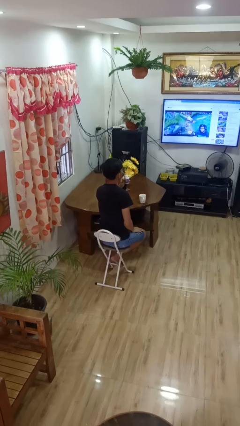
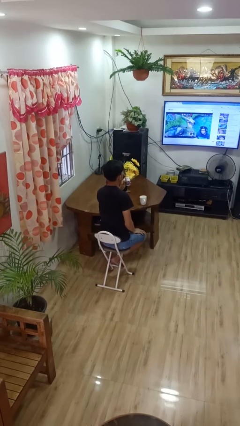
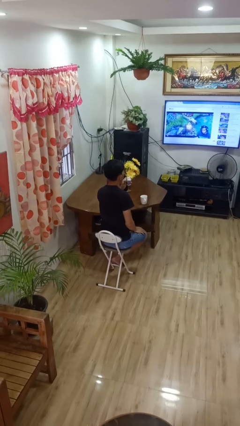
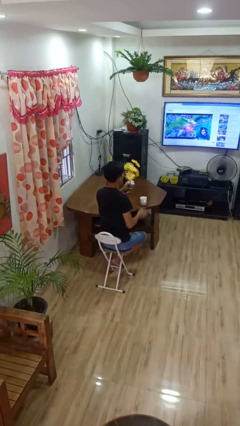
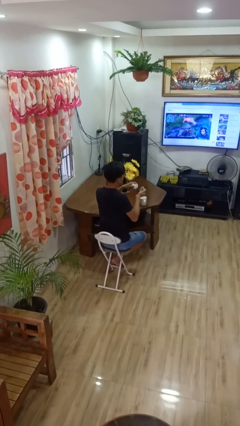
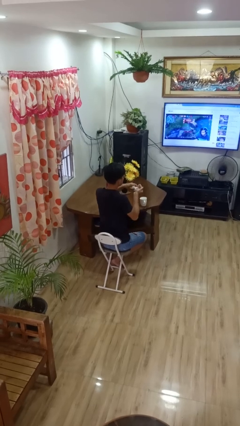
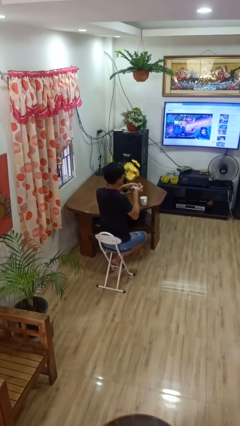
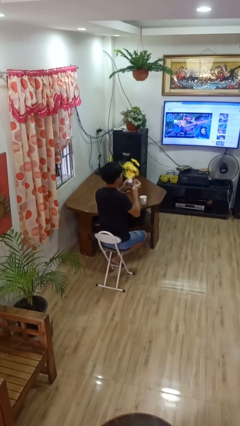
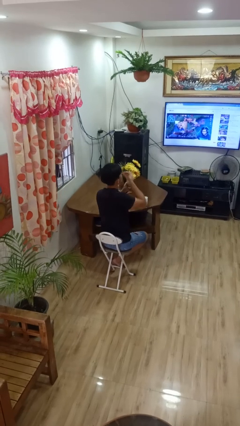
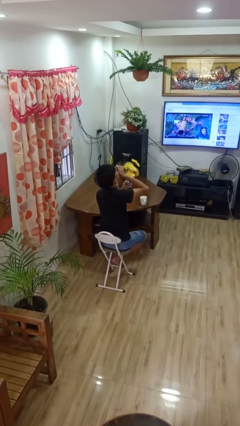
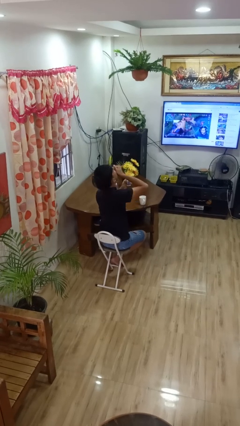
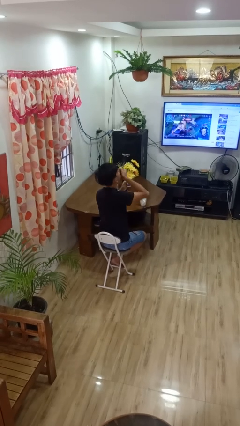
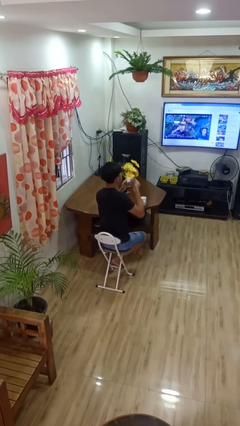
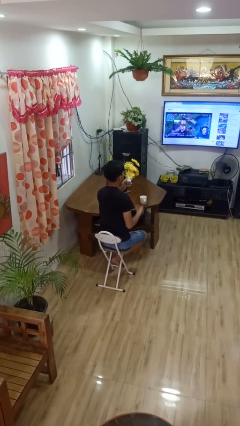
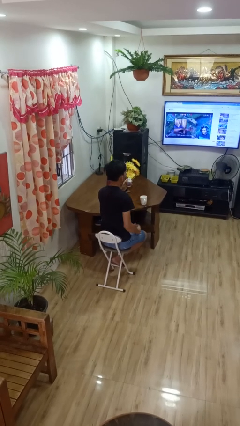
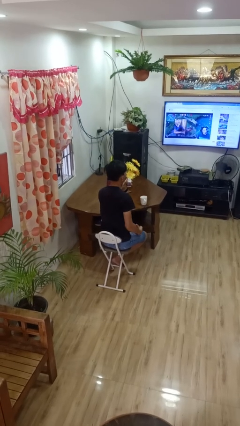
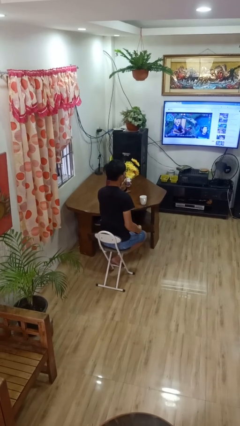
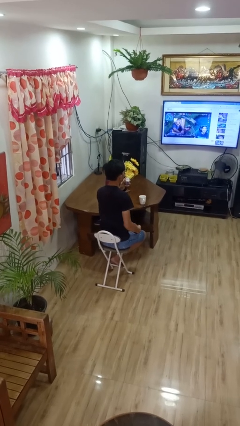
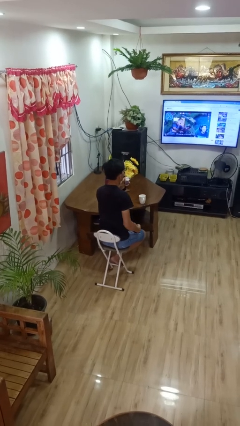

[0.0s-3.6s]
person takes medicine pills

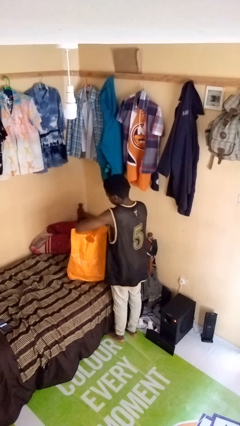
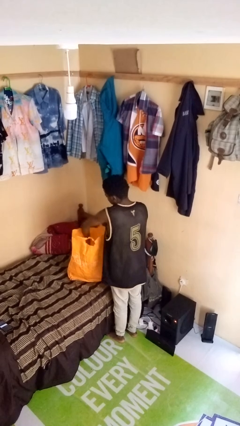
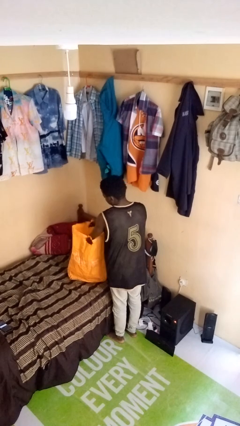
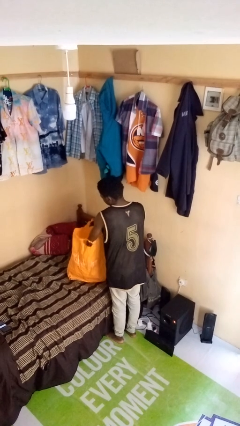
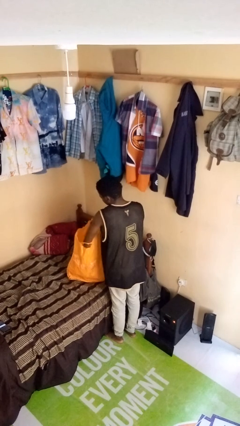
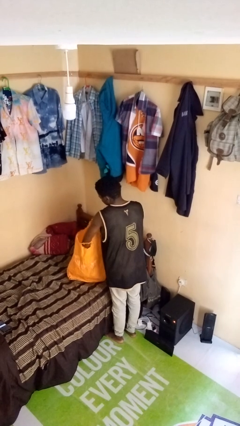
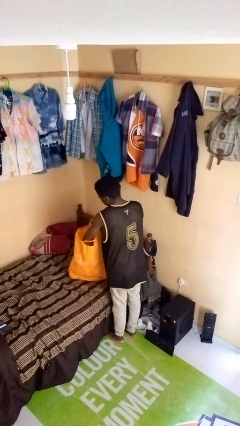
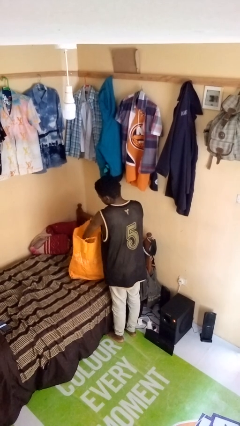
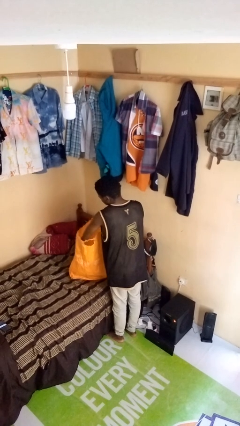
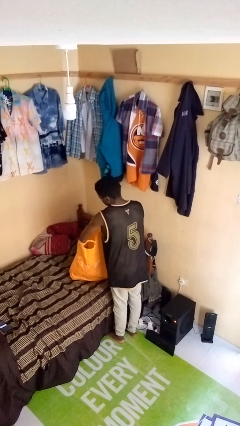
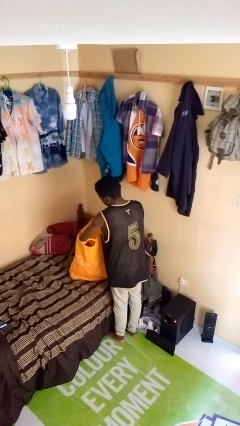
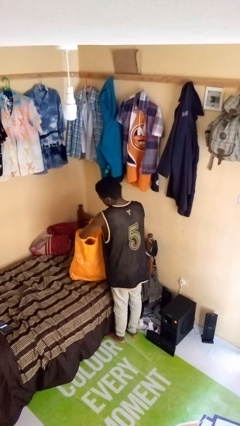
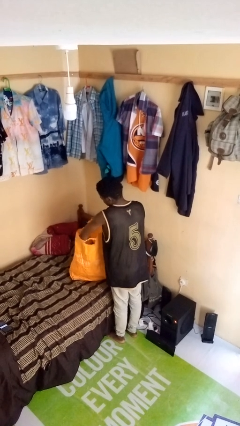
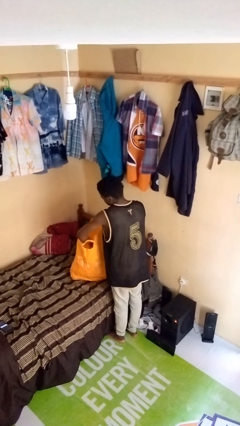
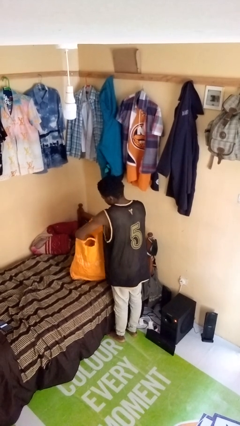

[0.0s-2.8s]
person searches in bag

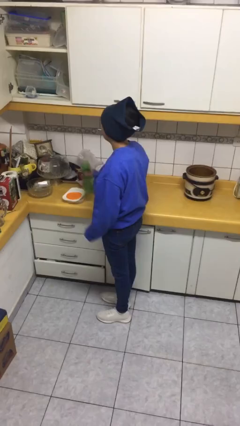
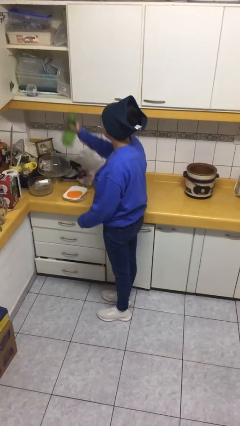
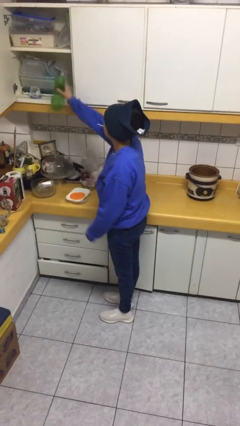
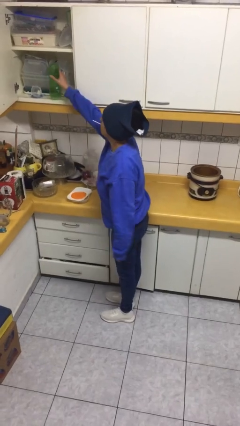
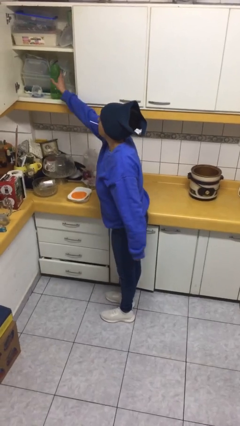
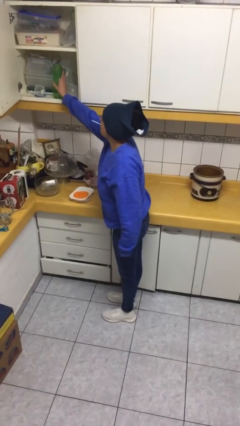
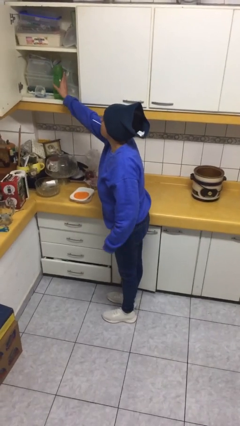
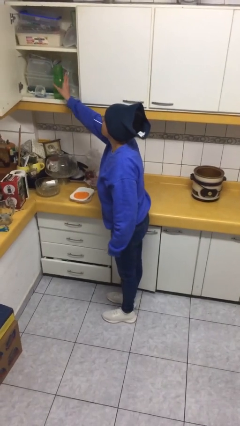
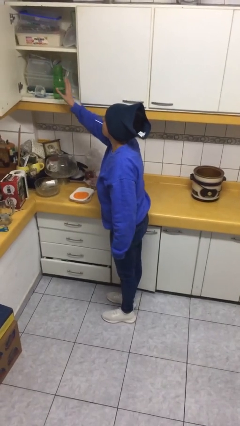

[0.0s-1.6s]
person puts object in cabinet

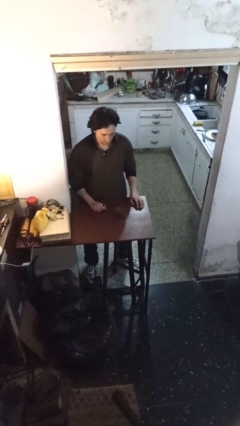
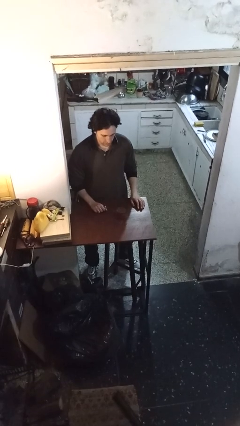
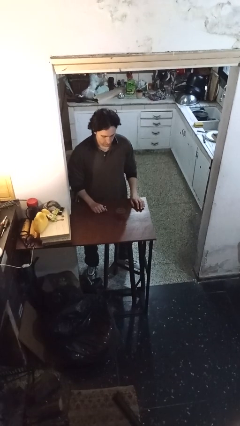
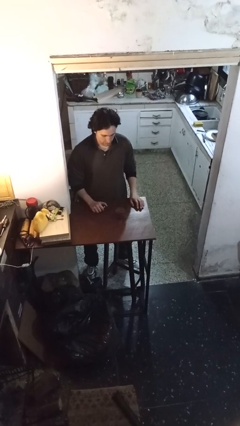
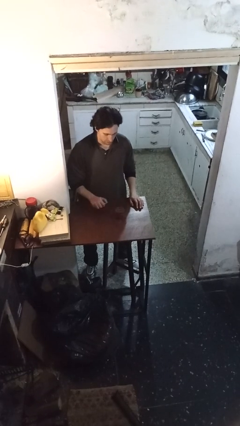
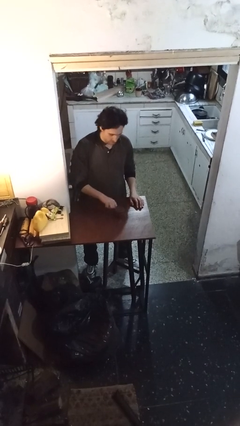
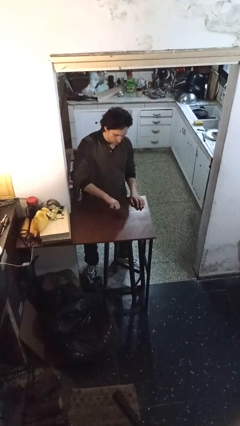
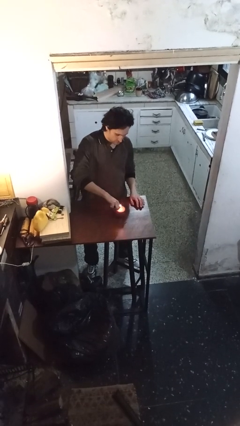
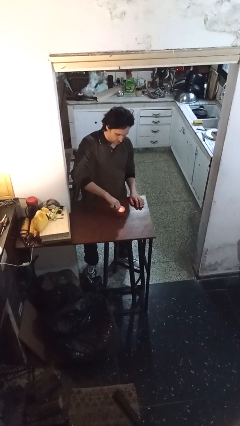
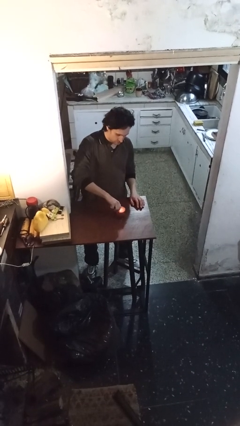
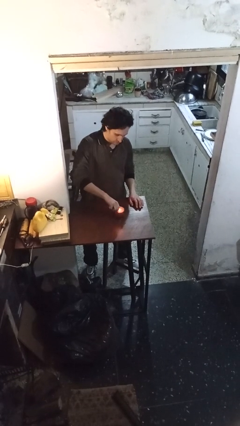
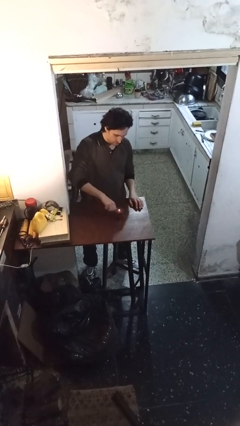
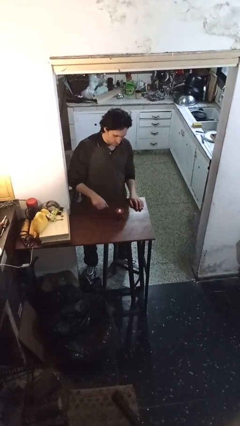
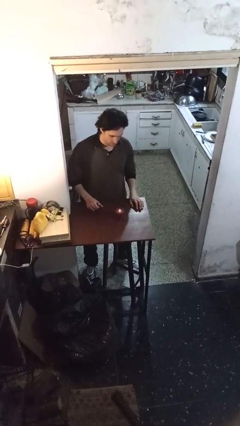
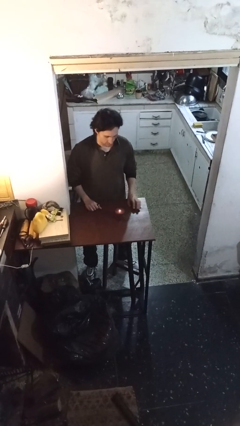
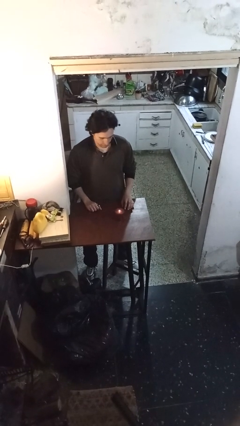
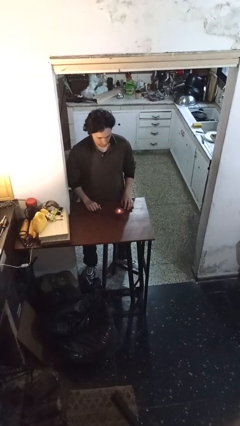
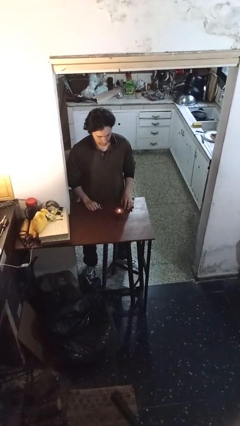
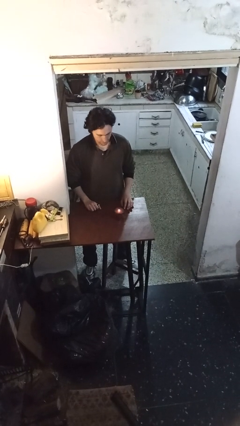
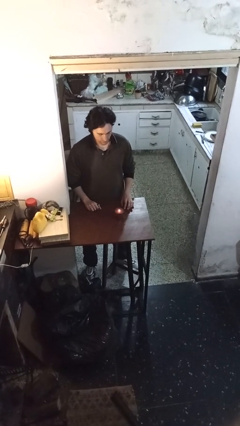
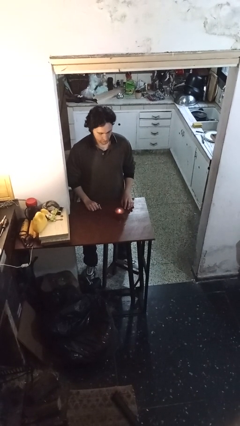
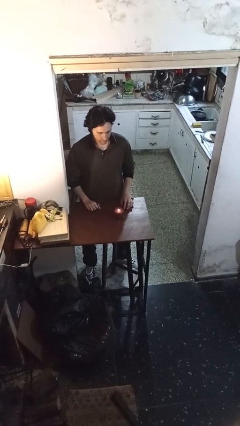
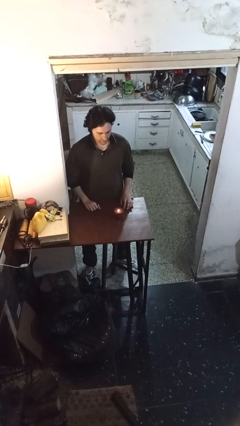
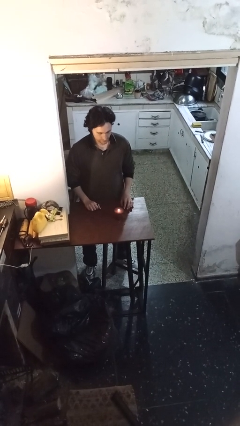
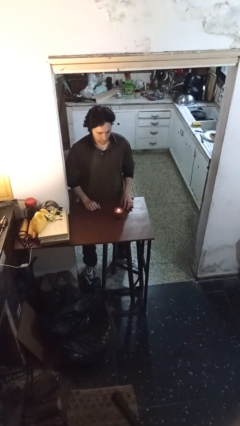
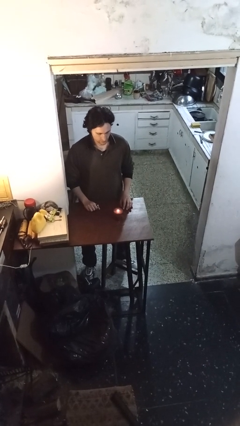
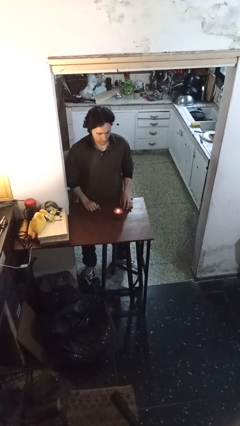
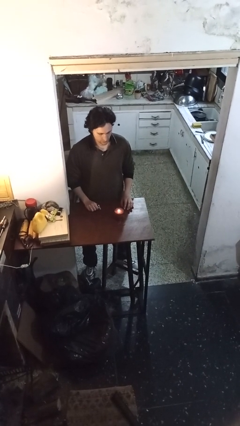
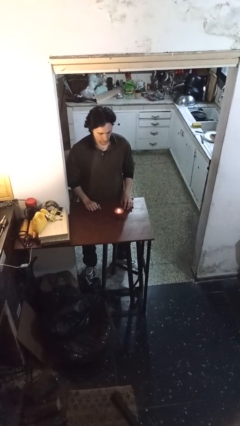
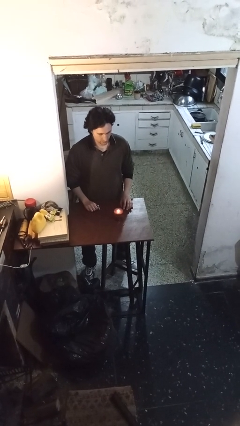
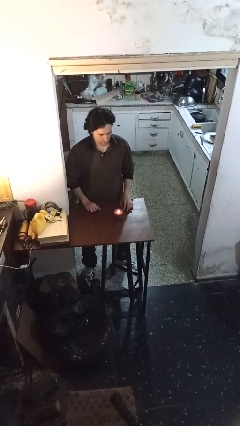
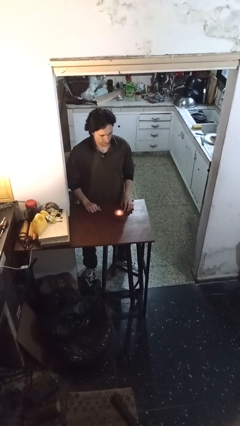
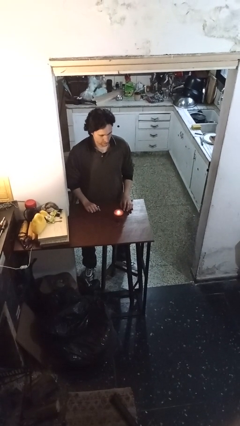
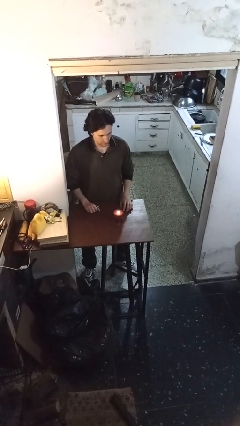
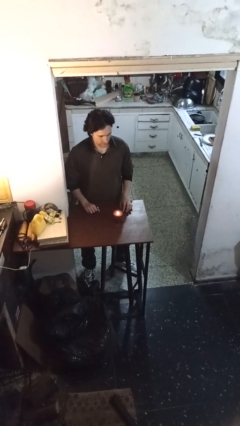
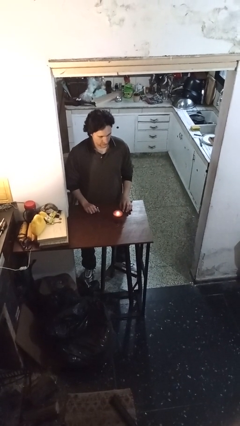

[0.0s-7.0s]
person lights candle

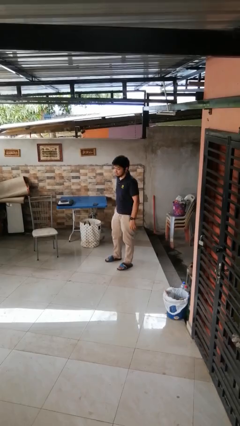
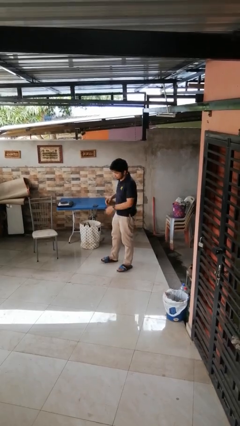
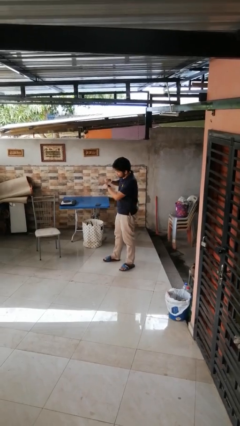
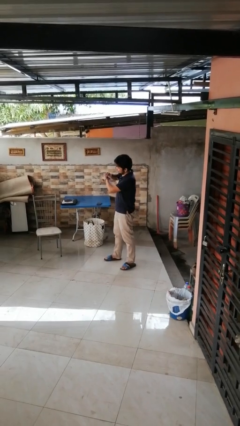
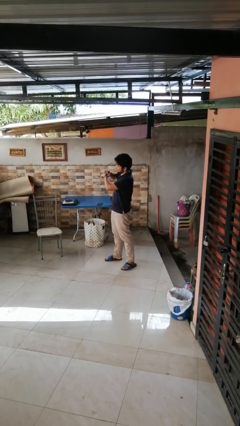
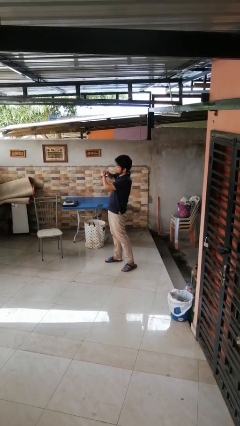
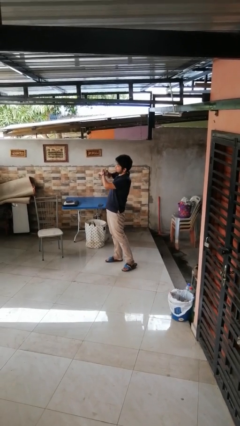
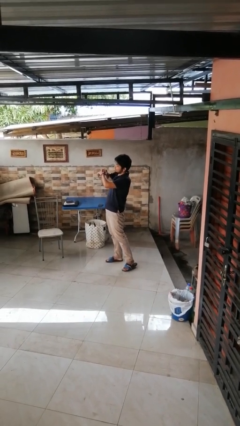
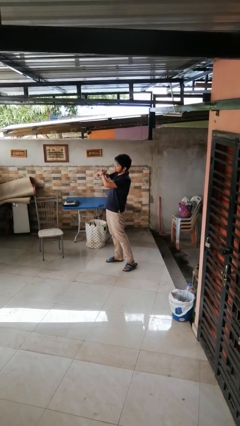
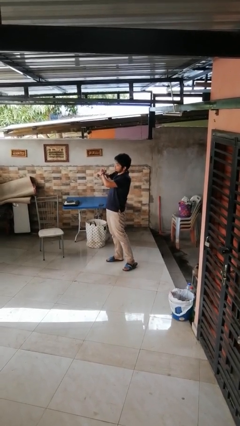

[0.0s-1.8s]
person looks at wristwatch

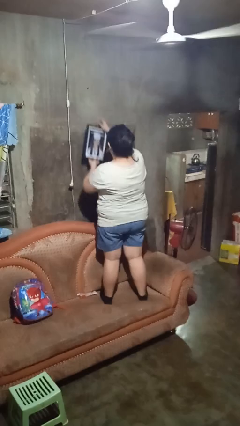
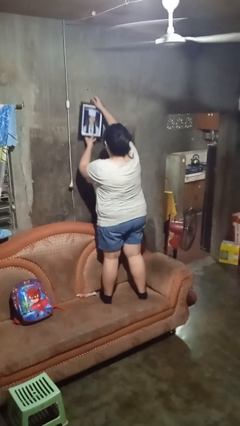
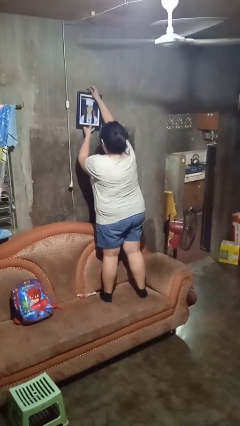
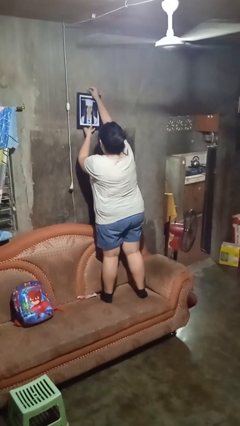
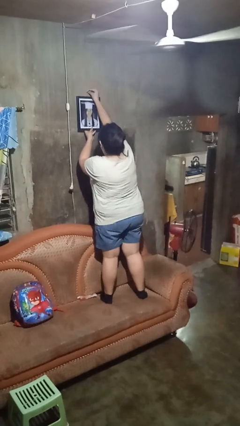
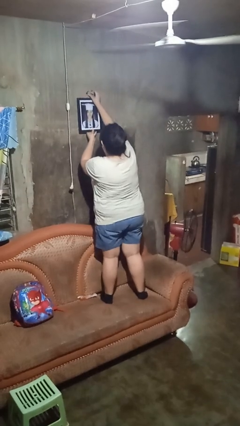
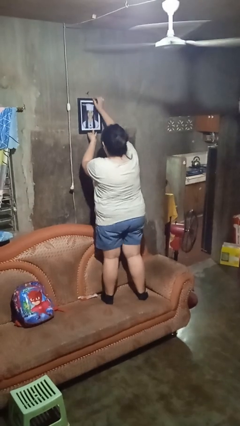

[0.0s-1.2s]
person puts up picture frame
